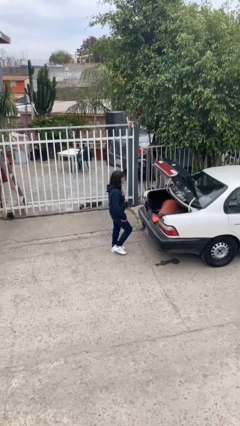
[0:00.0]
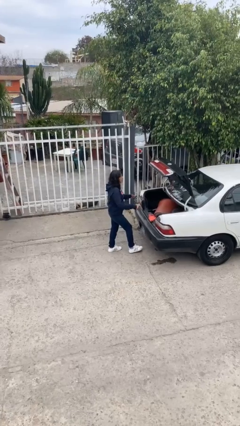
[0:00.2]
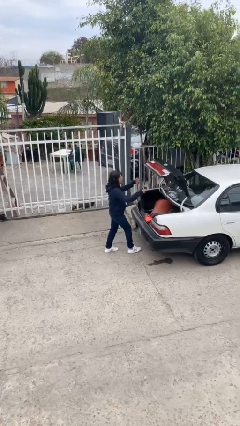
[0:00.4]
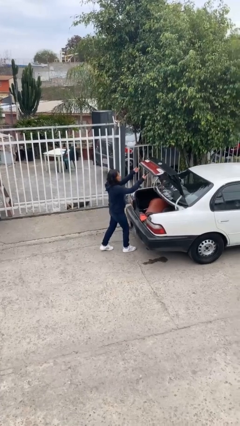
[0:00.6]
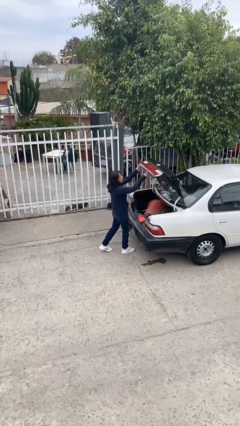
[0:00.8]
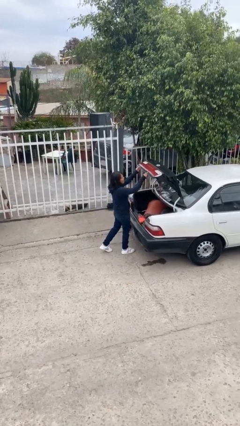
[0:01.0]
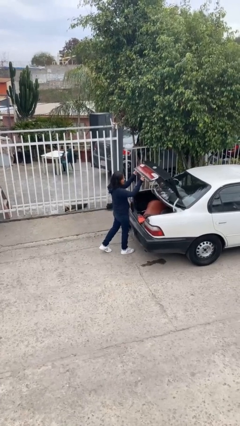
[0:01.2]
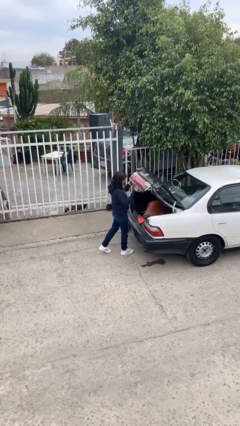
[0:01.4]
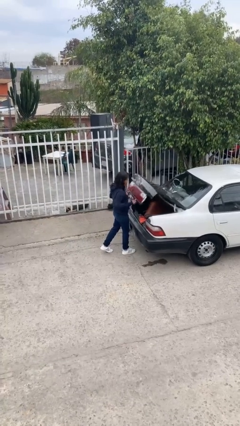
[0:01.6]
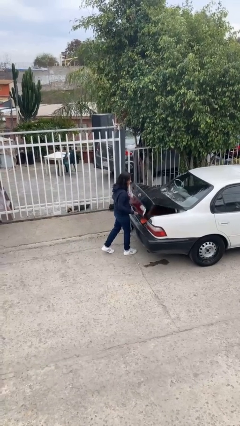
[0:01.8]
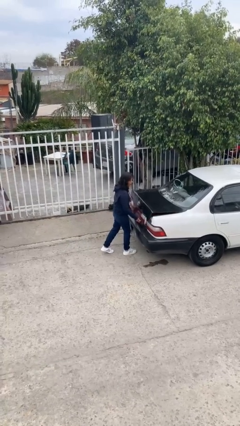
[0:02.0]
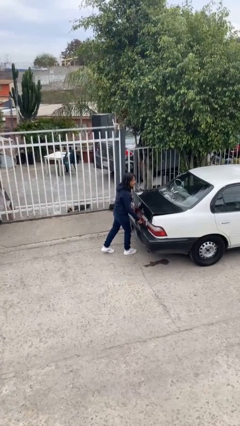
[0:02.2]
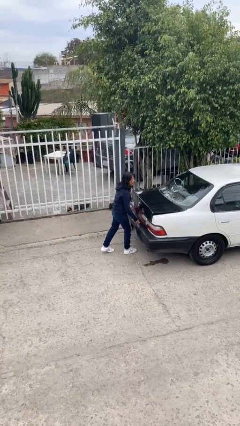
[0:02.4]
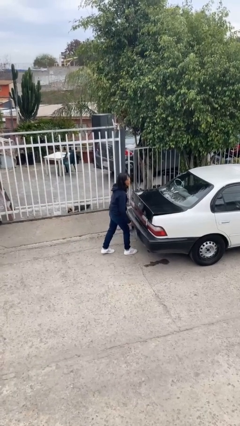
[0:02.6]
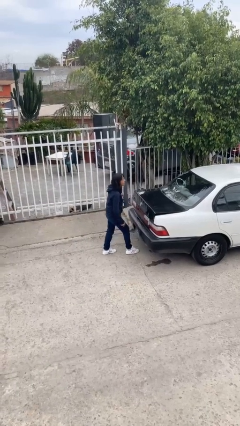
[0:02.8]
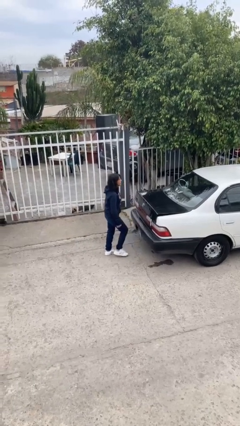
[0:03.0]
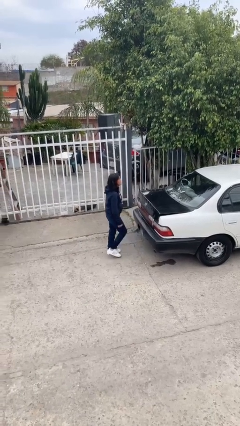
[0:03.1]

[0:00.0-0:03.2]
person closes car trunk

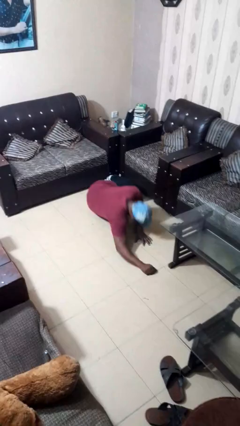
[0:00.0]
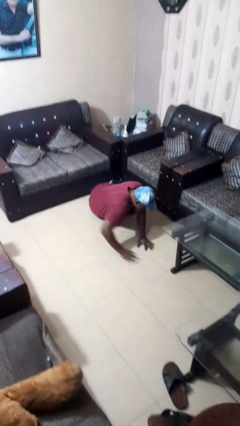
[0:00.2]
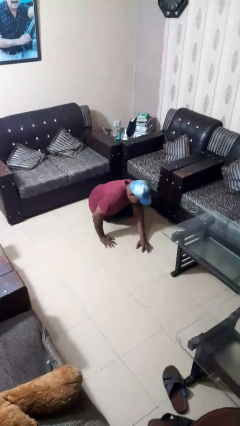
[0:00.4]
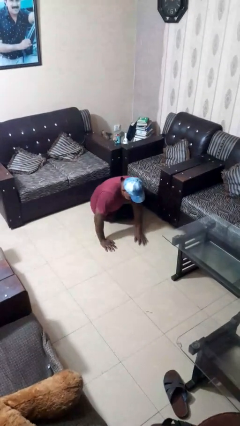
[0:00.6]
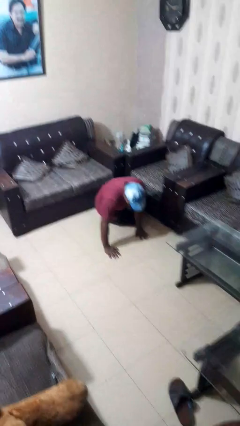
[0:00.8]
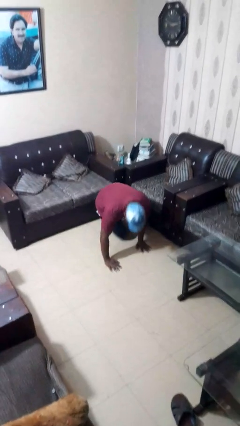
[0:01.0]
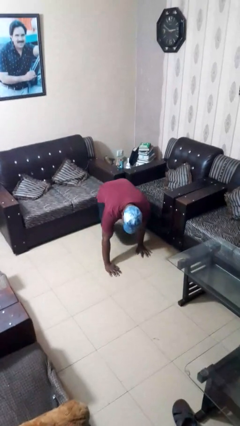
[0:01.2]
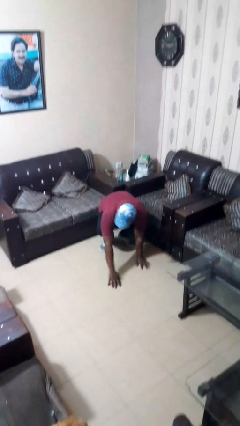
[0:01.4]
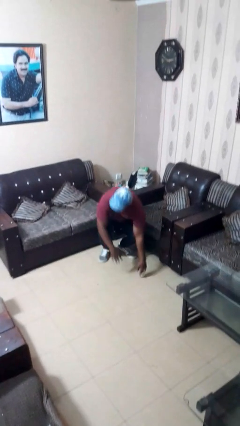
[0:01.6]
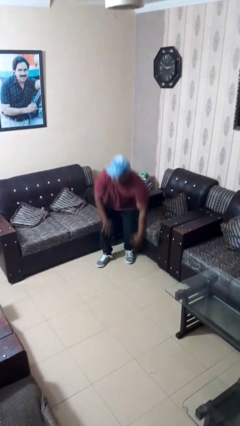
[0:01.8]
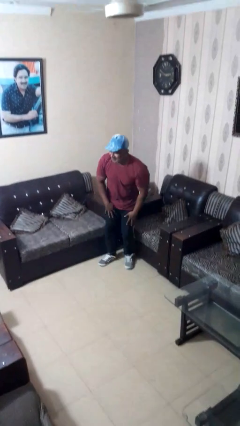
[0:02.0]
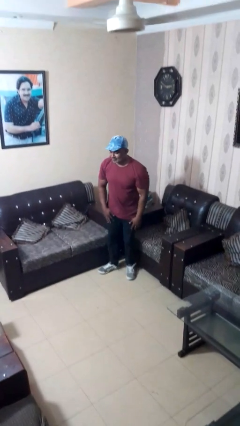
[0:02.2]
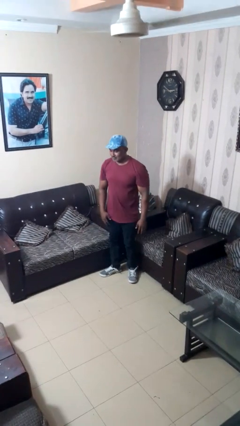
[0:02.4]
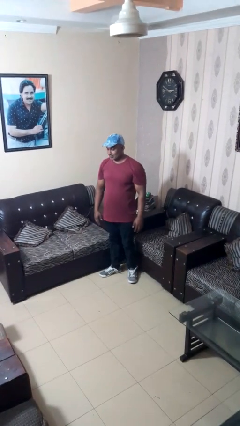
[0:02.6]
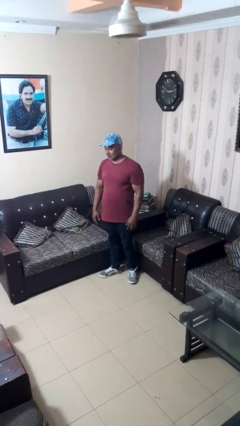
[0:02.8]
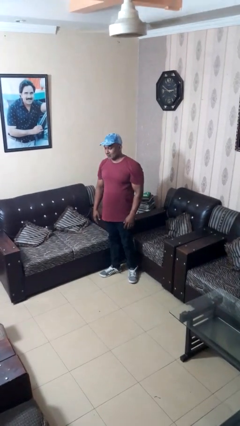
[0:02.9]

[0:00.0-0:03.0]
person stands up from floor

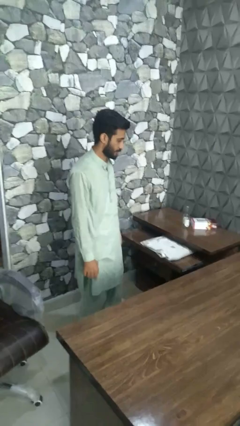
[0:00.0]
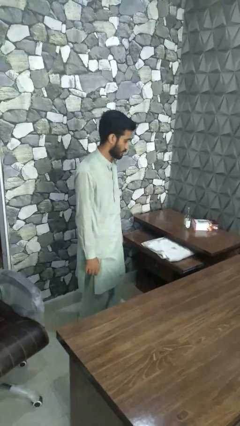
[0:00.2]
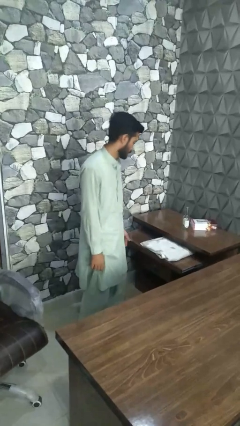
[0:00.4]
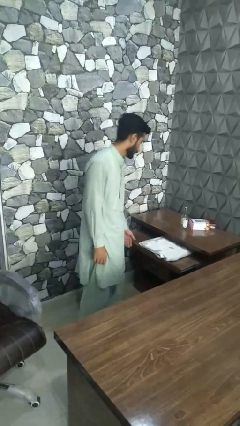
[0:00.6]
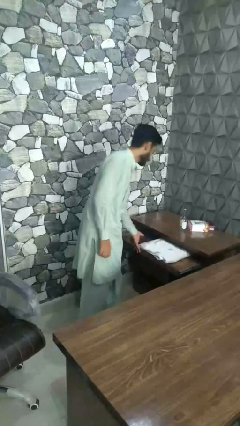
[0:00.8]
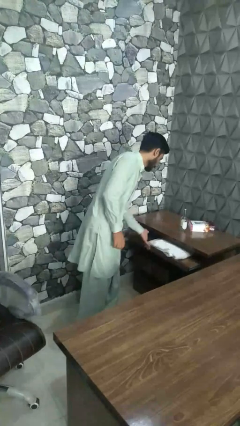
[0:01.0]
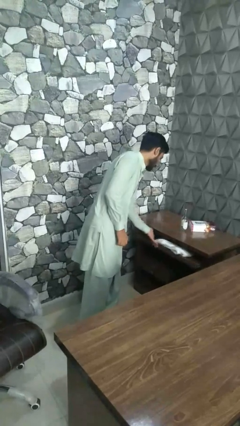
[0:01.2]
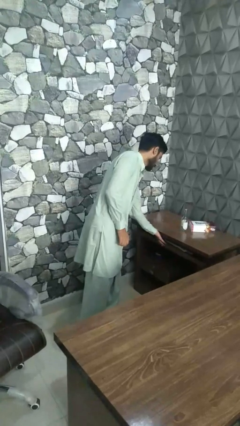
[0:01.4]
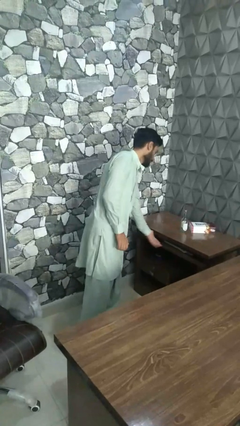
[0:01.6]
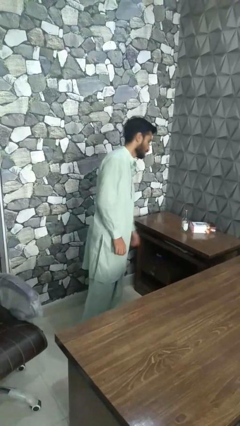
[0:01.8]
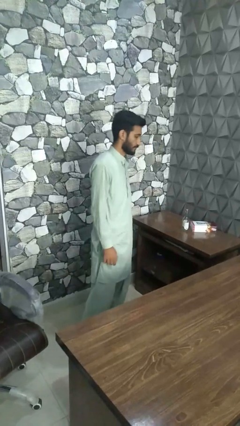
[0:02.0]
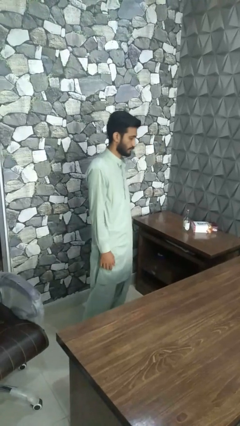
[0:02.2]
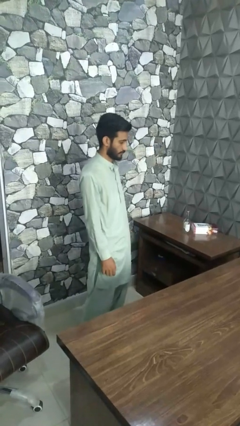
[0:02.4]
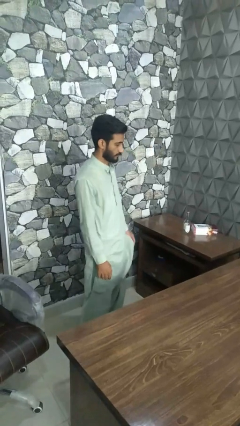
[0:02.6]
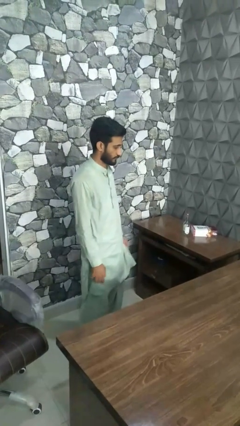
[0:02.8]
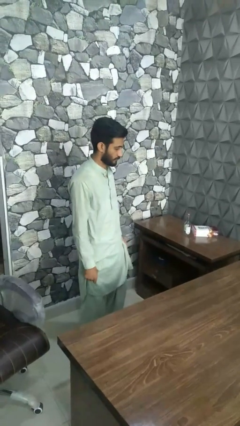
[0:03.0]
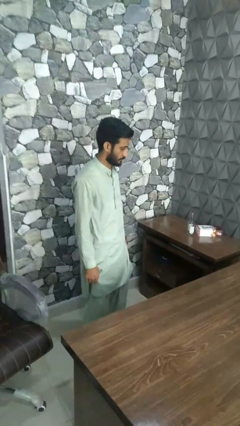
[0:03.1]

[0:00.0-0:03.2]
person closes dresser drawer

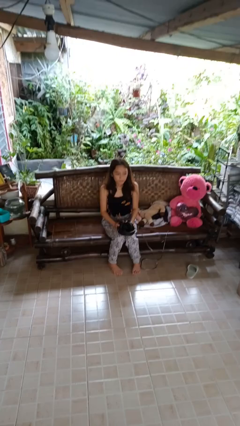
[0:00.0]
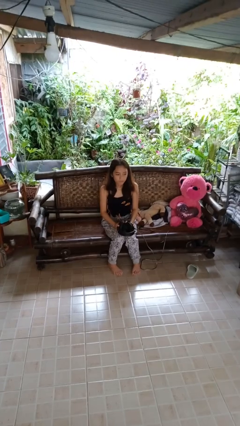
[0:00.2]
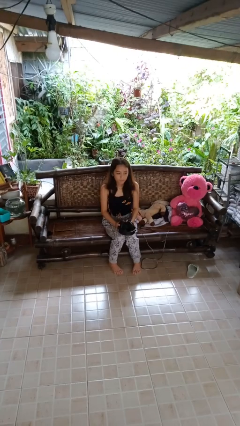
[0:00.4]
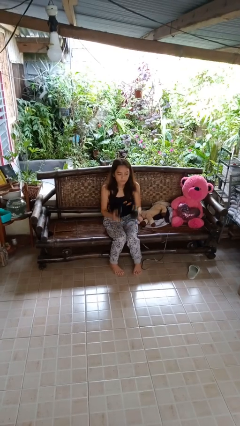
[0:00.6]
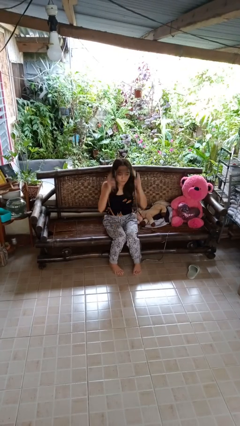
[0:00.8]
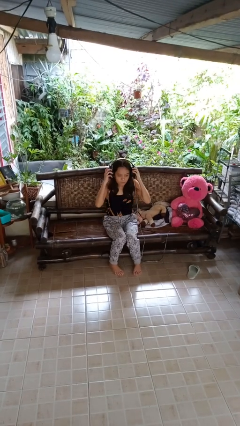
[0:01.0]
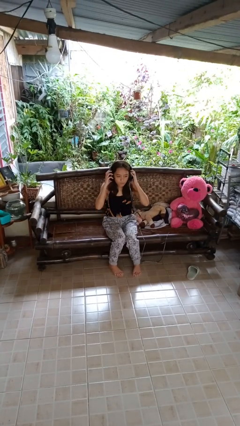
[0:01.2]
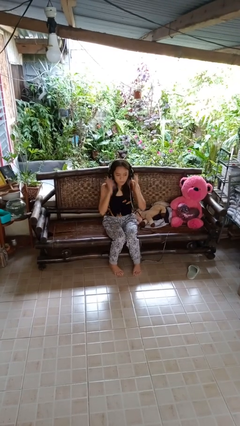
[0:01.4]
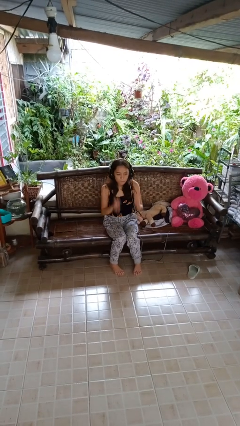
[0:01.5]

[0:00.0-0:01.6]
person puts on headphones

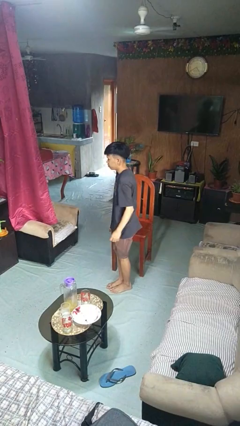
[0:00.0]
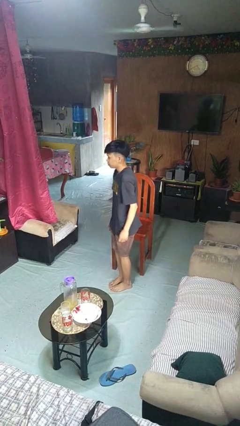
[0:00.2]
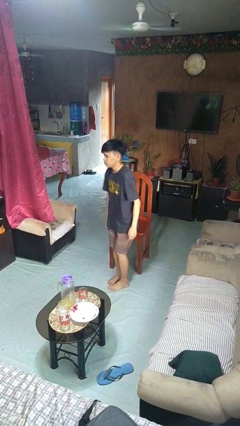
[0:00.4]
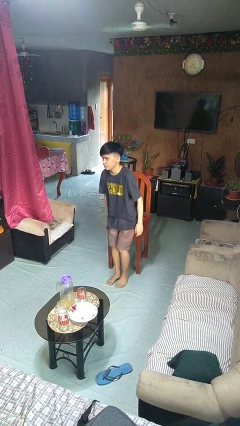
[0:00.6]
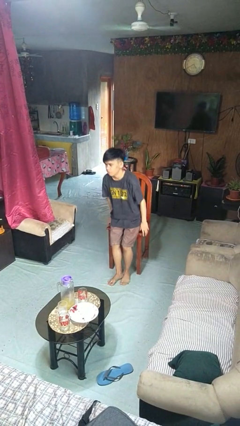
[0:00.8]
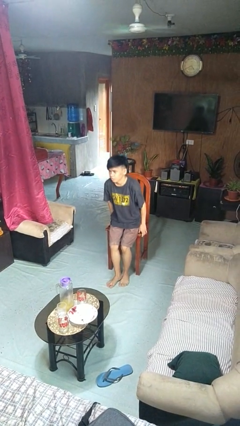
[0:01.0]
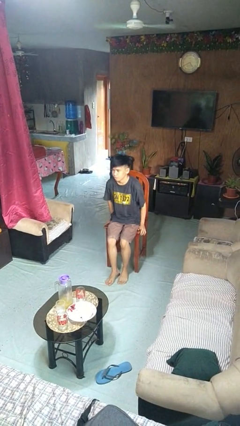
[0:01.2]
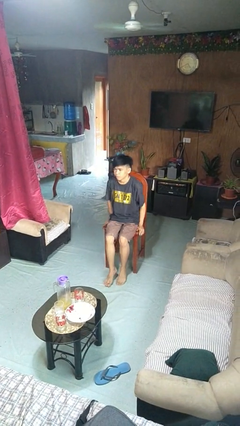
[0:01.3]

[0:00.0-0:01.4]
person sits down

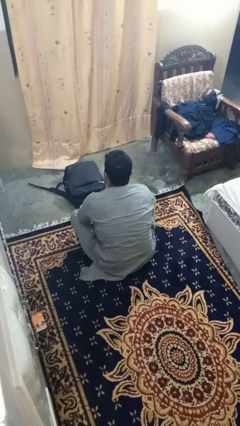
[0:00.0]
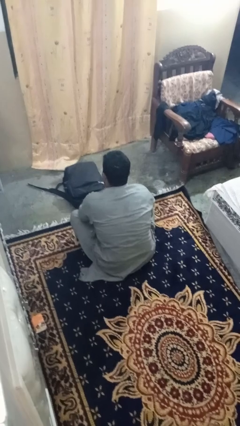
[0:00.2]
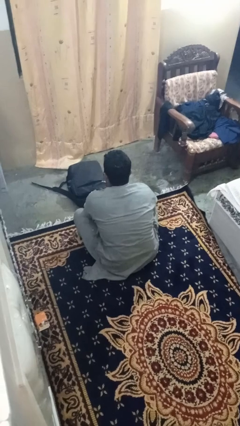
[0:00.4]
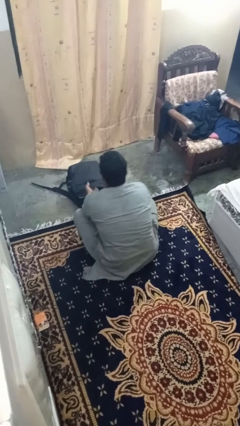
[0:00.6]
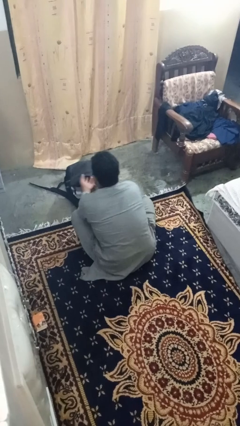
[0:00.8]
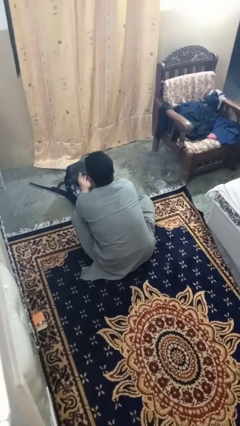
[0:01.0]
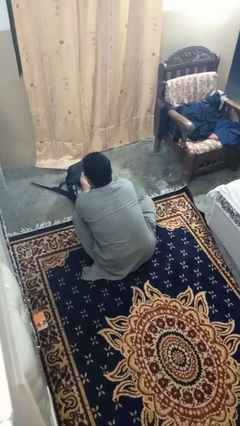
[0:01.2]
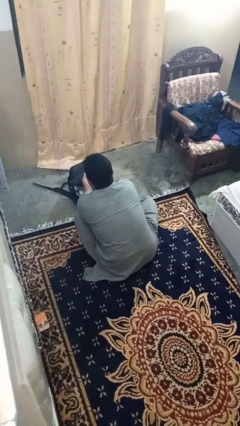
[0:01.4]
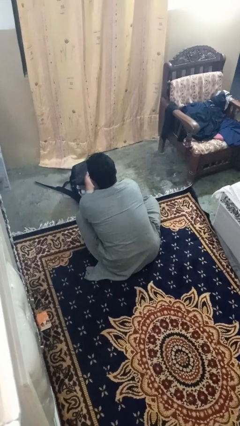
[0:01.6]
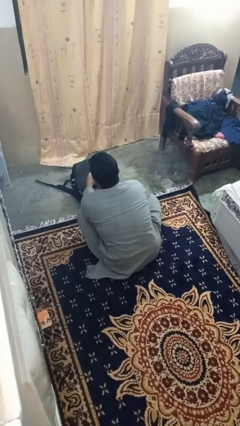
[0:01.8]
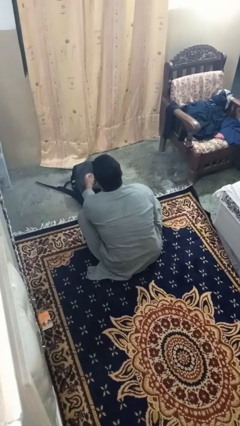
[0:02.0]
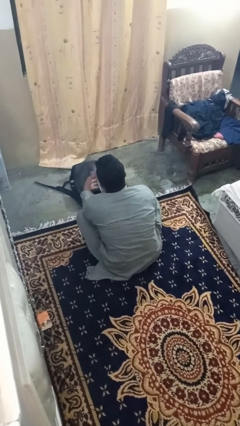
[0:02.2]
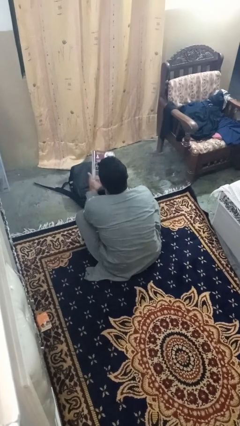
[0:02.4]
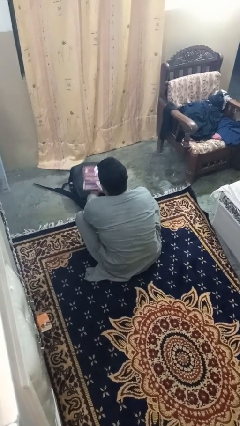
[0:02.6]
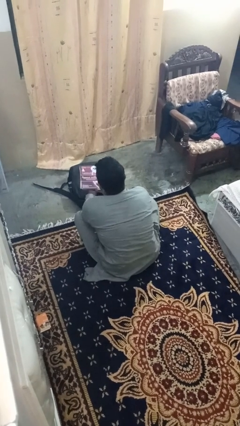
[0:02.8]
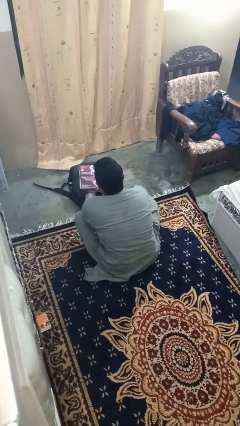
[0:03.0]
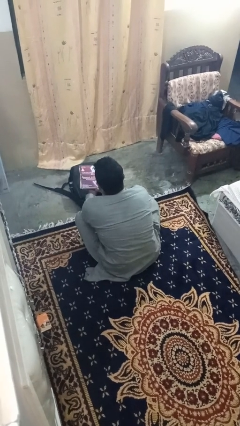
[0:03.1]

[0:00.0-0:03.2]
person takes object from bag

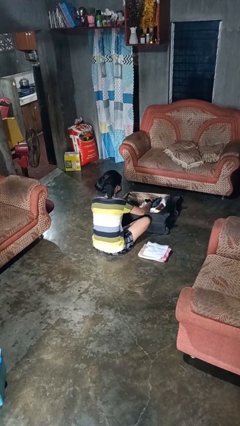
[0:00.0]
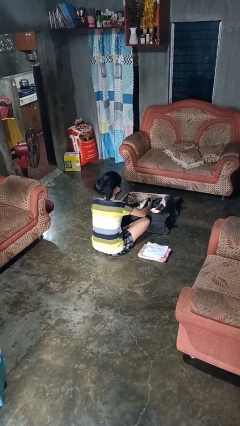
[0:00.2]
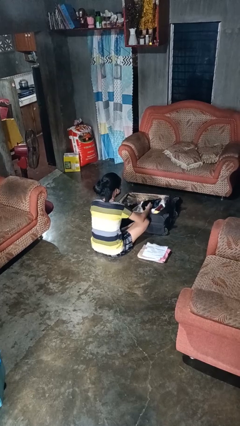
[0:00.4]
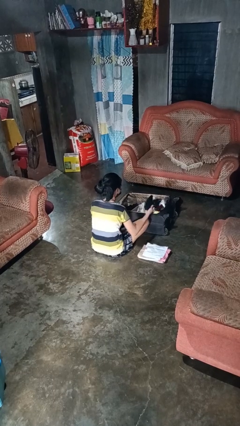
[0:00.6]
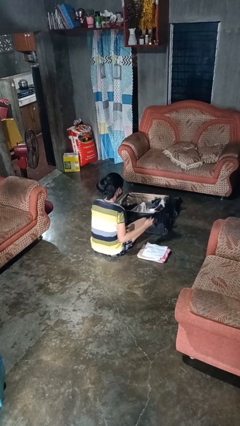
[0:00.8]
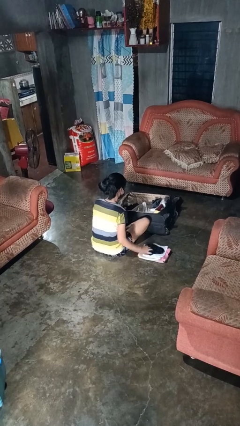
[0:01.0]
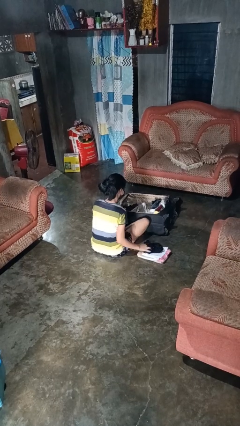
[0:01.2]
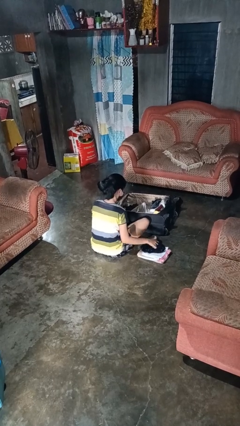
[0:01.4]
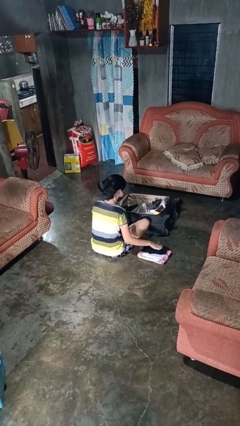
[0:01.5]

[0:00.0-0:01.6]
person unloads clothes from suitcase

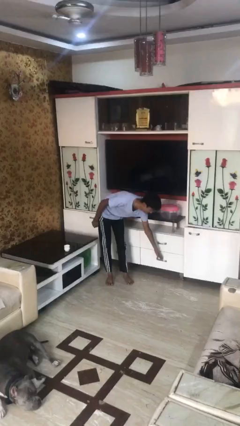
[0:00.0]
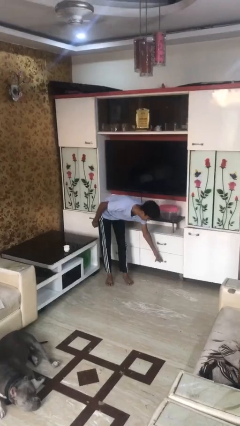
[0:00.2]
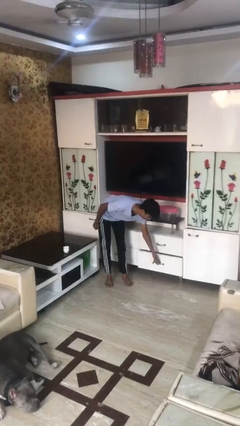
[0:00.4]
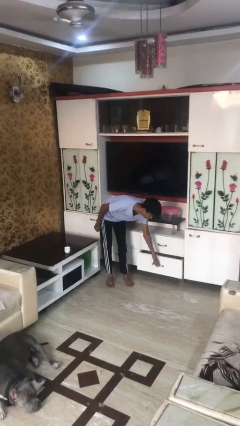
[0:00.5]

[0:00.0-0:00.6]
person opens dresser drawer
